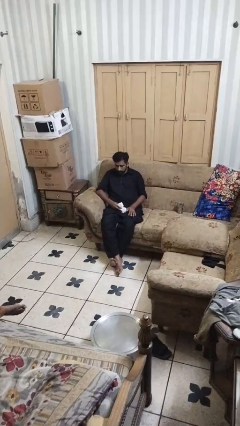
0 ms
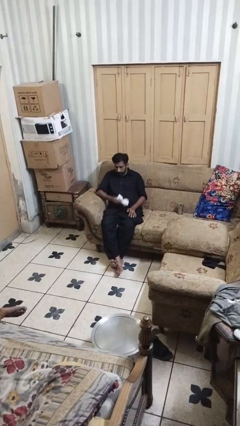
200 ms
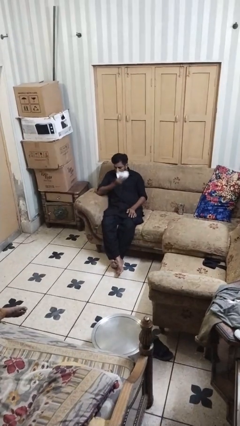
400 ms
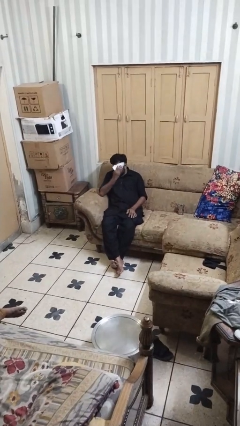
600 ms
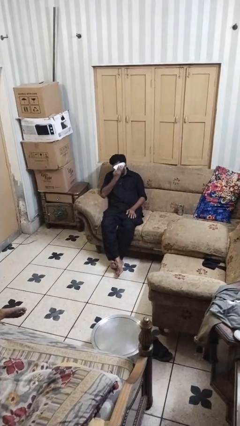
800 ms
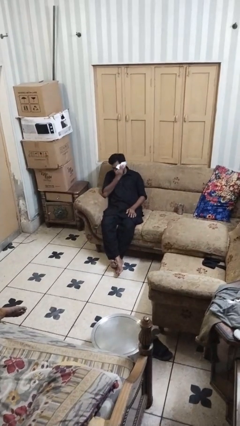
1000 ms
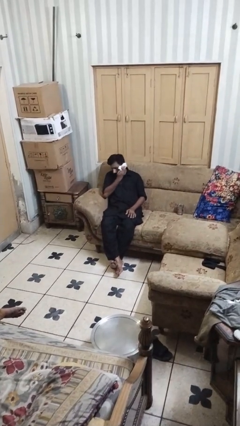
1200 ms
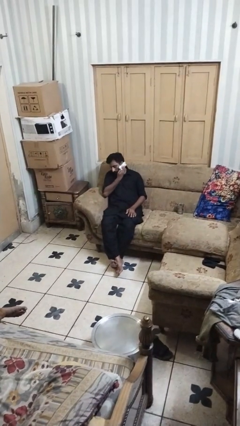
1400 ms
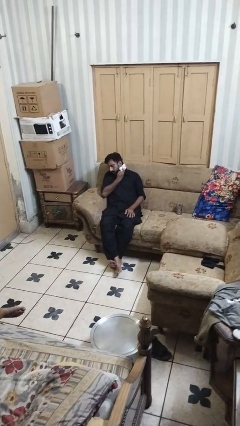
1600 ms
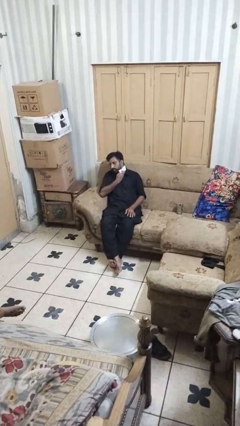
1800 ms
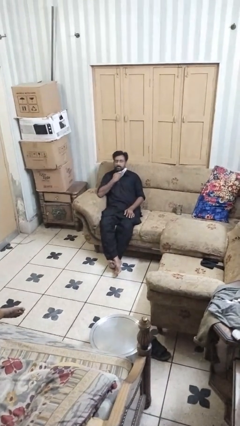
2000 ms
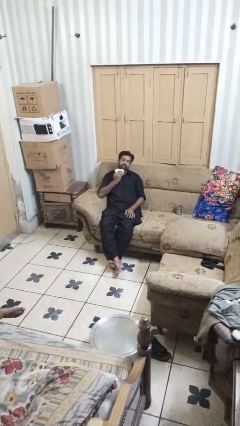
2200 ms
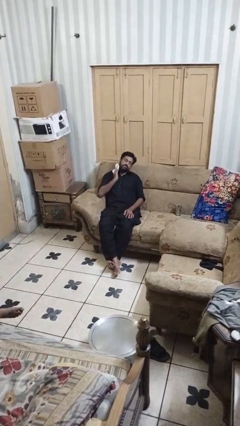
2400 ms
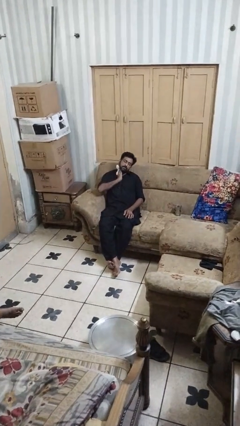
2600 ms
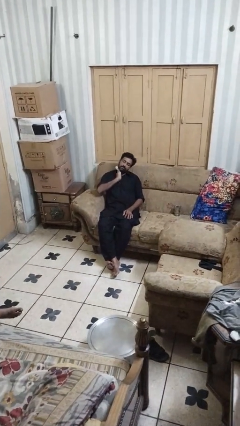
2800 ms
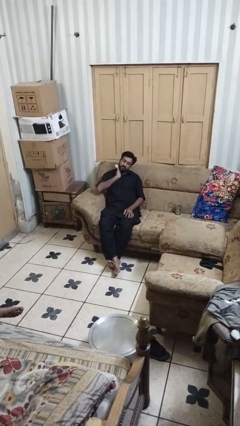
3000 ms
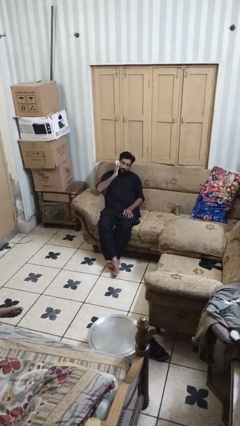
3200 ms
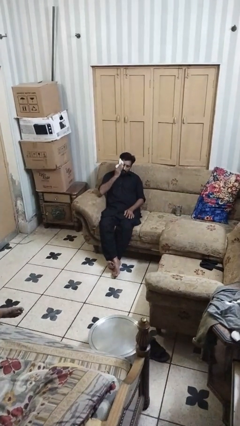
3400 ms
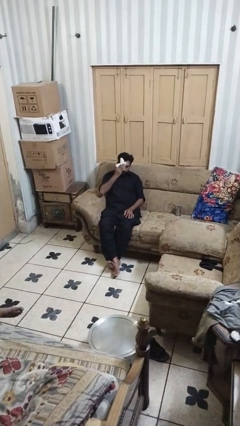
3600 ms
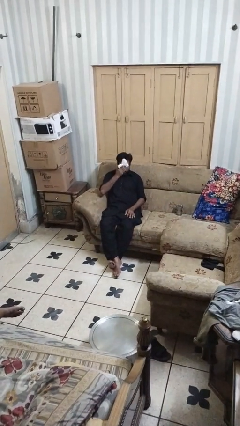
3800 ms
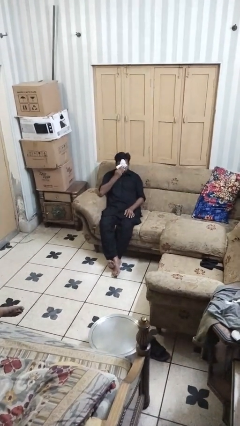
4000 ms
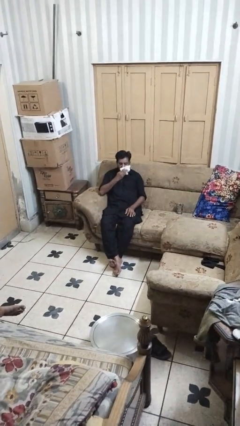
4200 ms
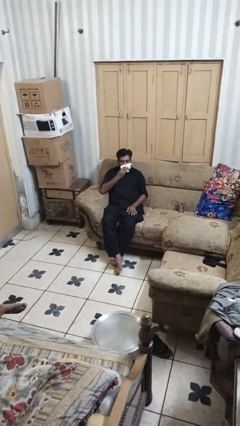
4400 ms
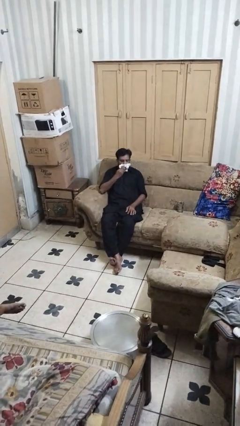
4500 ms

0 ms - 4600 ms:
person wipes mouth with napkin

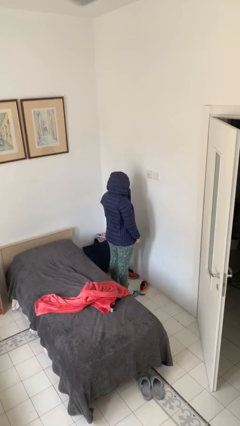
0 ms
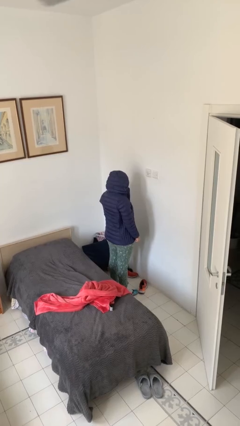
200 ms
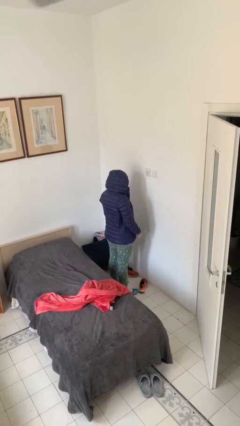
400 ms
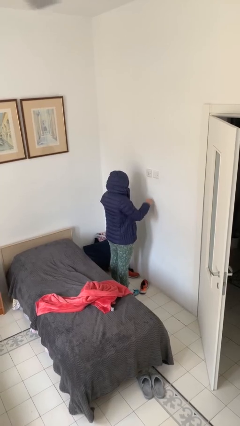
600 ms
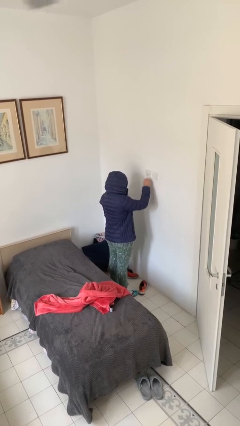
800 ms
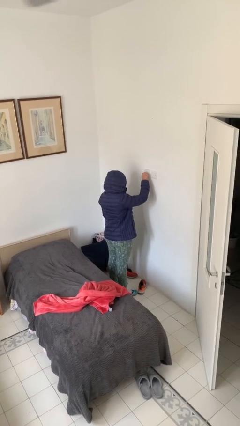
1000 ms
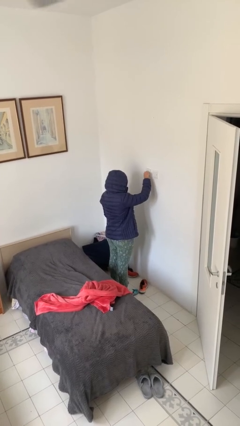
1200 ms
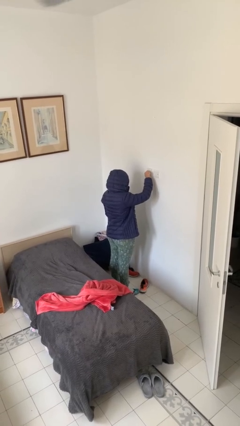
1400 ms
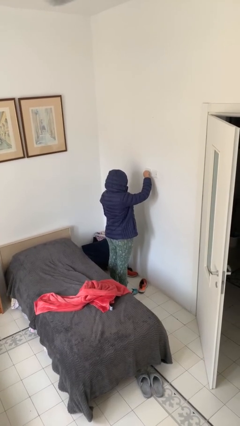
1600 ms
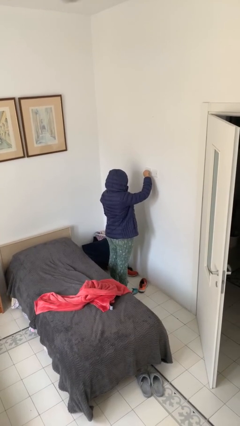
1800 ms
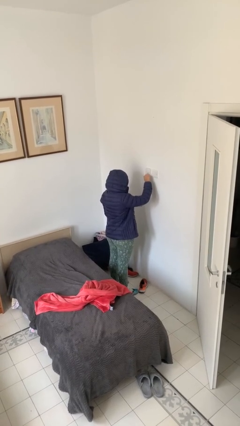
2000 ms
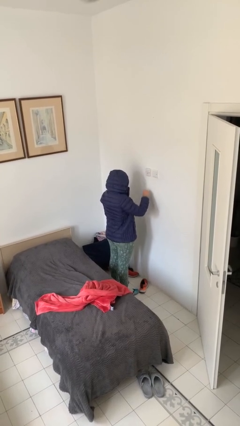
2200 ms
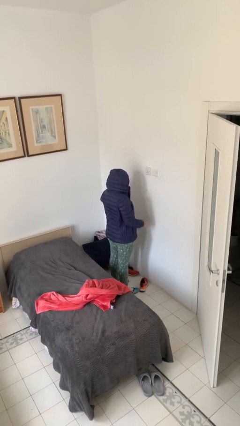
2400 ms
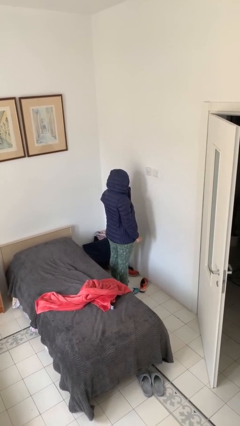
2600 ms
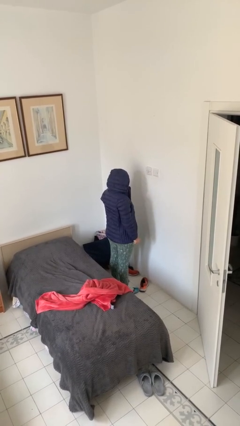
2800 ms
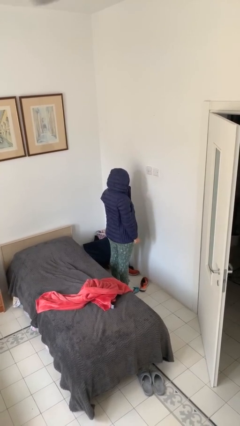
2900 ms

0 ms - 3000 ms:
person turns off fan

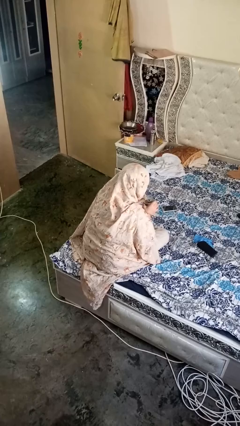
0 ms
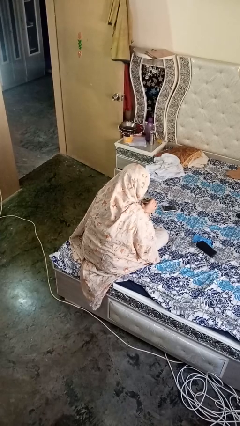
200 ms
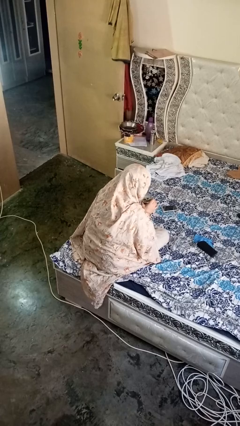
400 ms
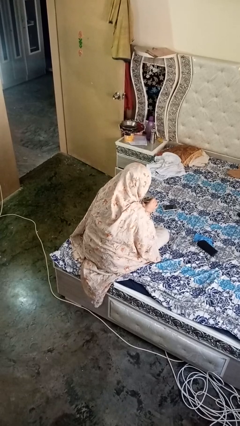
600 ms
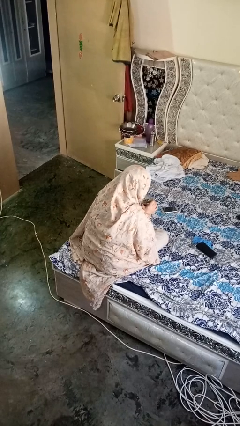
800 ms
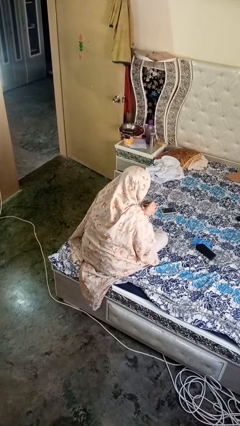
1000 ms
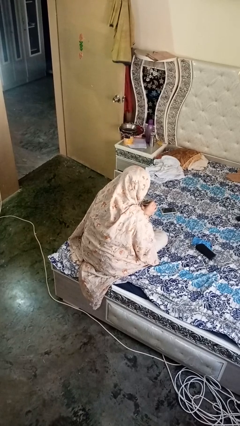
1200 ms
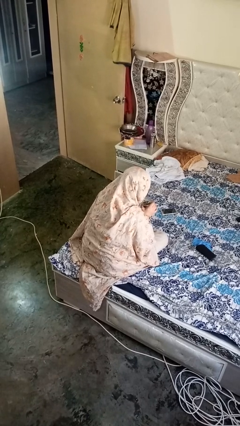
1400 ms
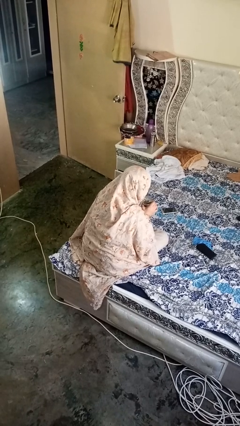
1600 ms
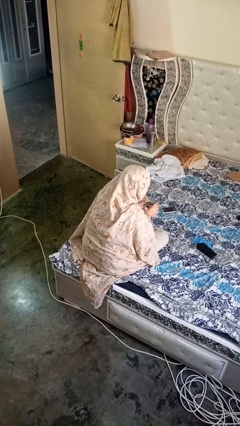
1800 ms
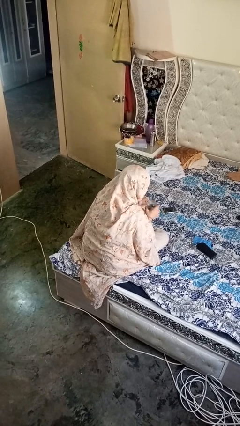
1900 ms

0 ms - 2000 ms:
person drinks from straw

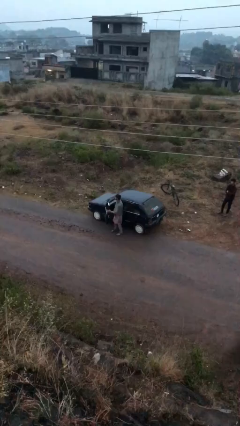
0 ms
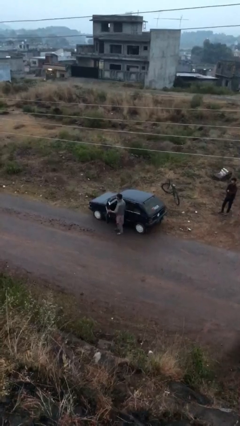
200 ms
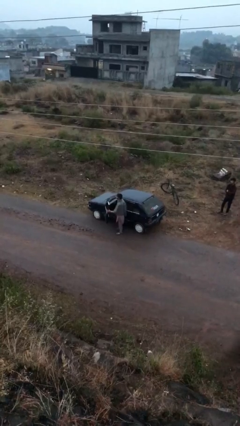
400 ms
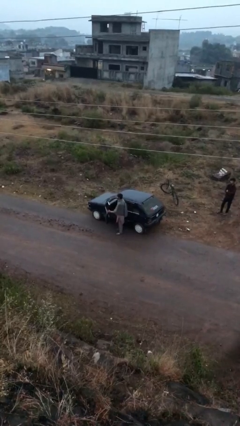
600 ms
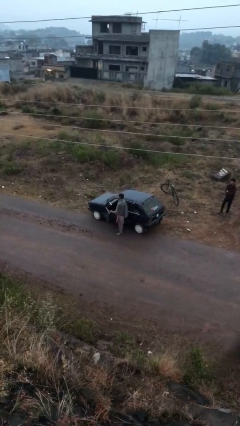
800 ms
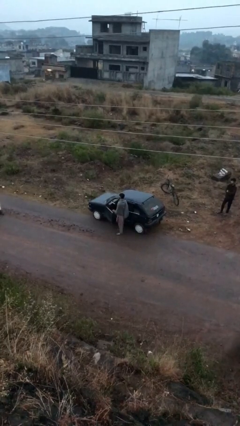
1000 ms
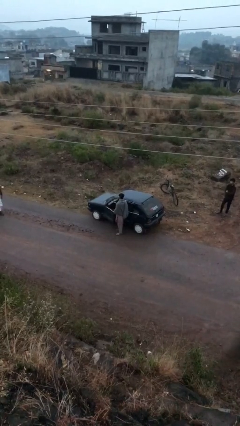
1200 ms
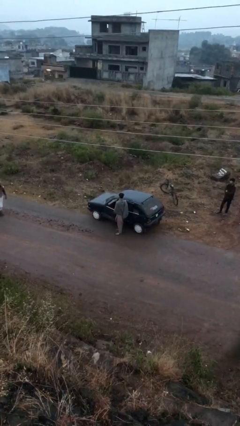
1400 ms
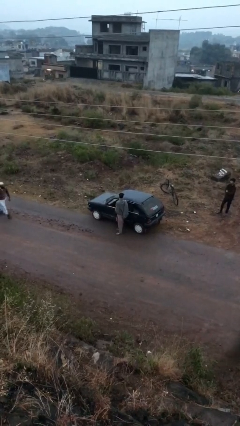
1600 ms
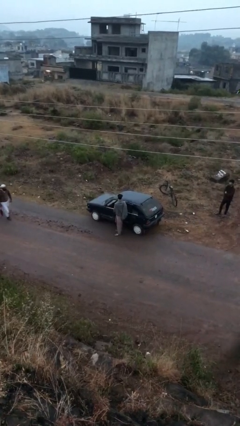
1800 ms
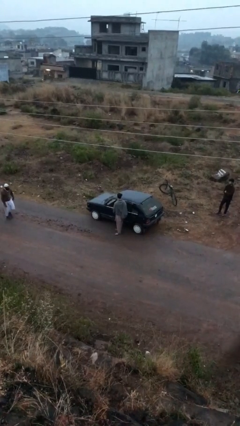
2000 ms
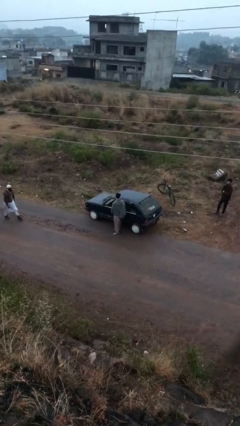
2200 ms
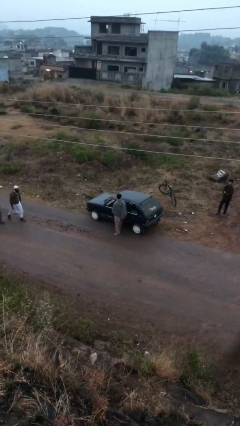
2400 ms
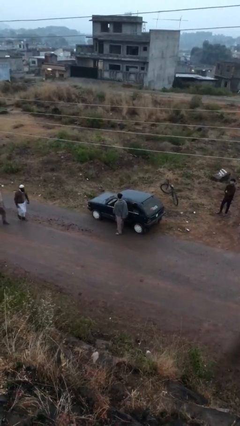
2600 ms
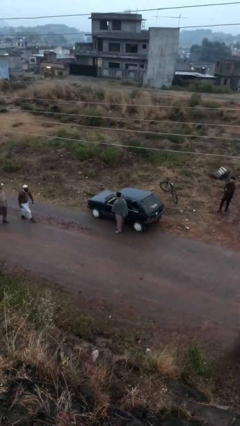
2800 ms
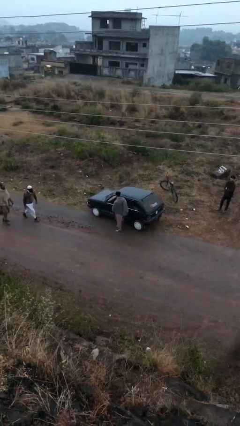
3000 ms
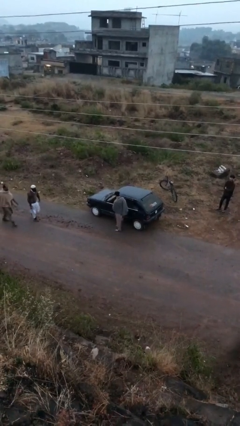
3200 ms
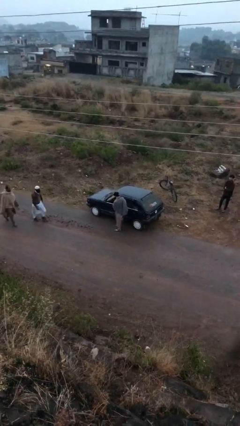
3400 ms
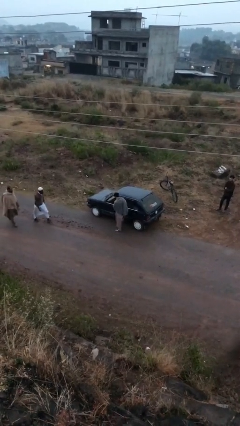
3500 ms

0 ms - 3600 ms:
person closes car door

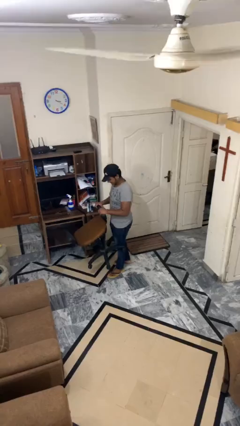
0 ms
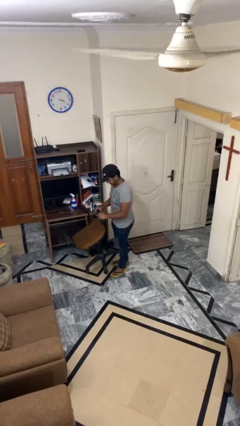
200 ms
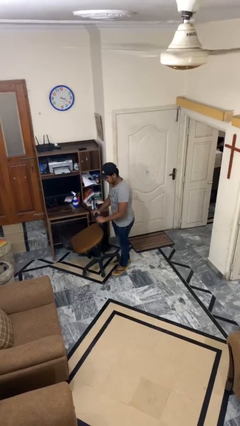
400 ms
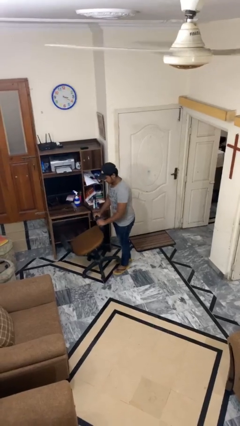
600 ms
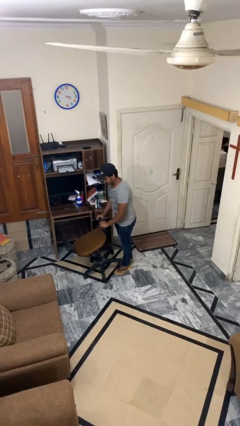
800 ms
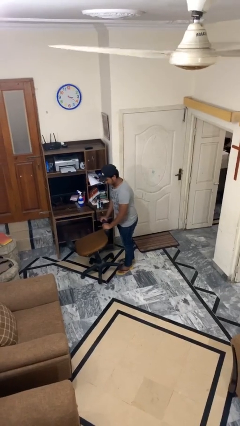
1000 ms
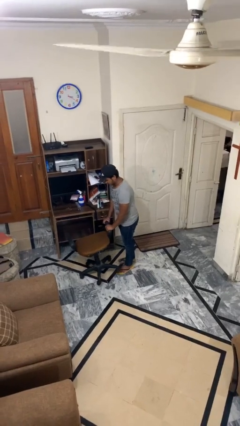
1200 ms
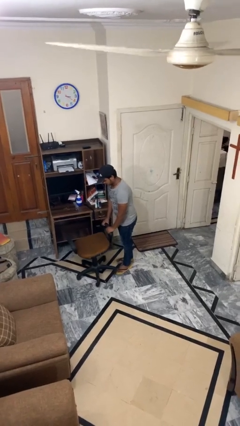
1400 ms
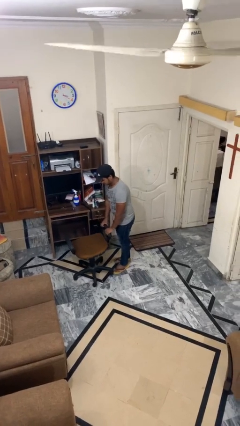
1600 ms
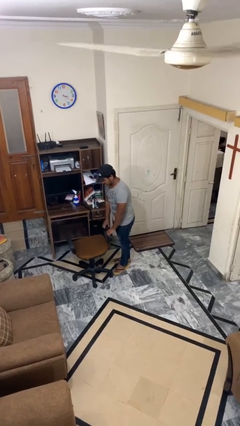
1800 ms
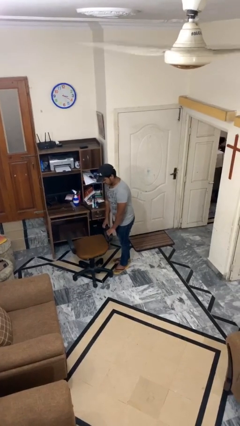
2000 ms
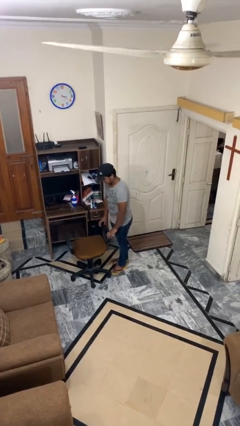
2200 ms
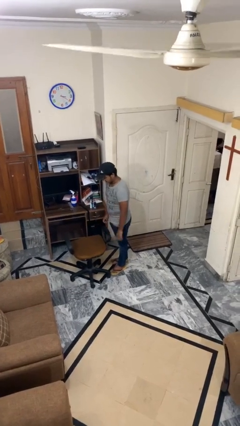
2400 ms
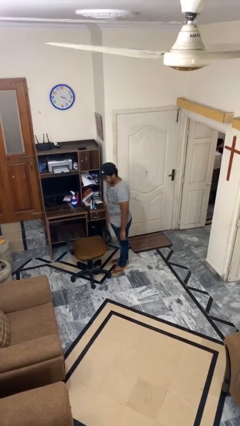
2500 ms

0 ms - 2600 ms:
person puts down object on floor

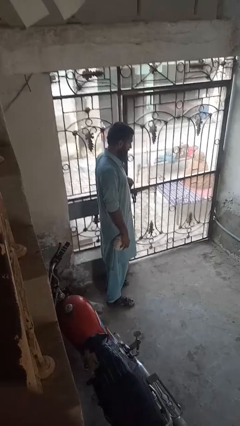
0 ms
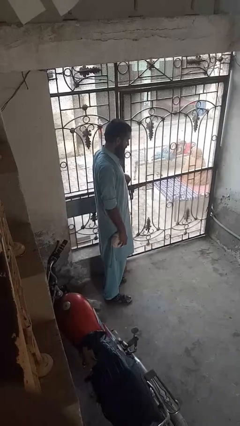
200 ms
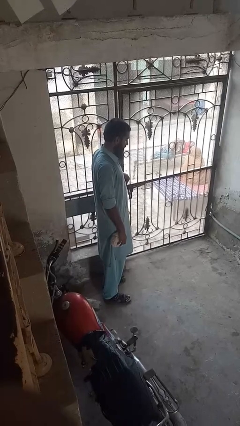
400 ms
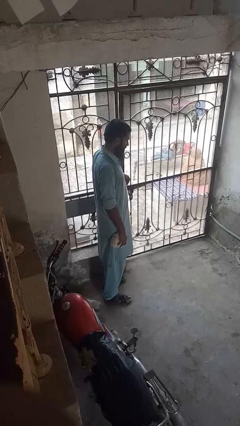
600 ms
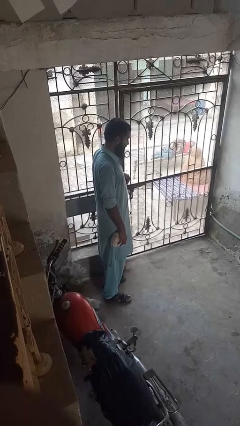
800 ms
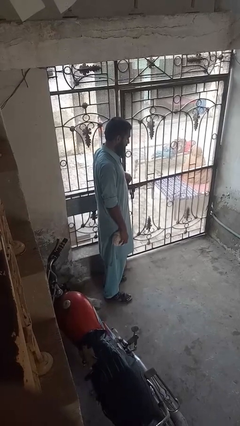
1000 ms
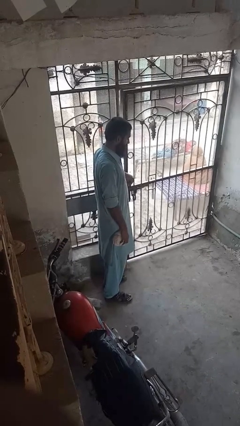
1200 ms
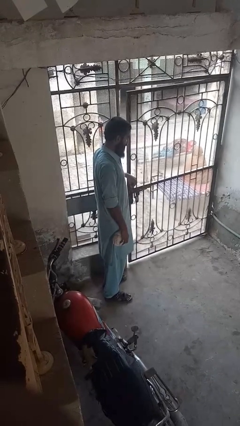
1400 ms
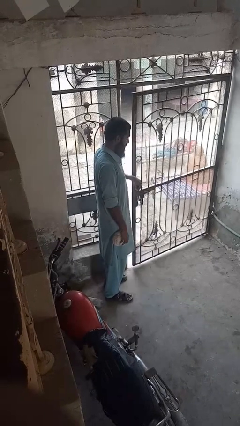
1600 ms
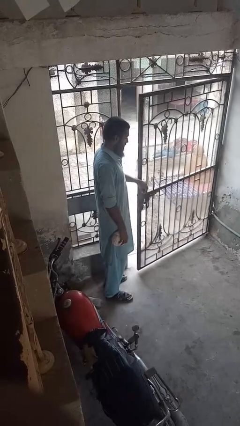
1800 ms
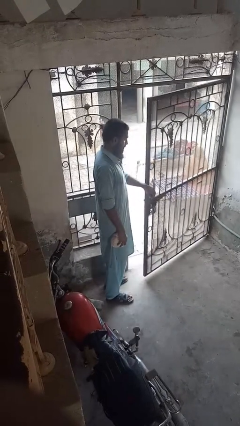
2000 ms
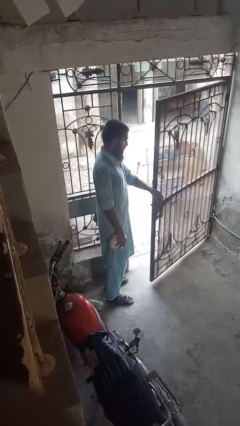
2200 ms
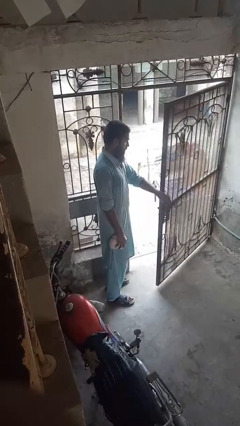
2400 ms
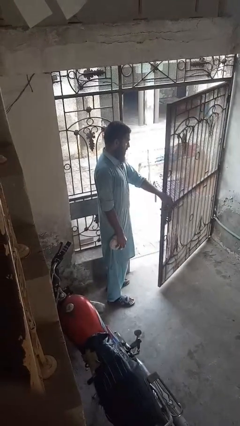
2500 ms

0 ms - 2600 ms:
person opens gate
